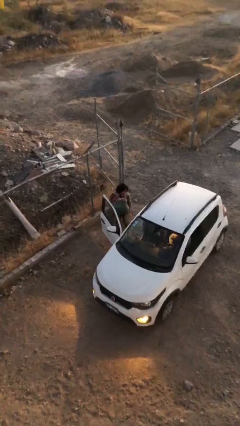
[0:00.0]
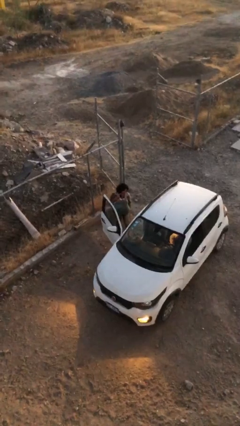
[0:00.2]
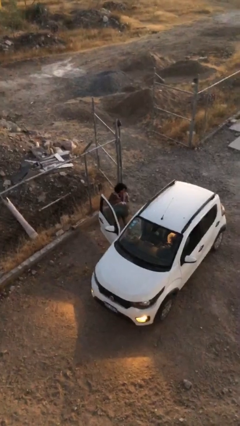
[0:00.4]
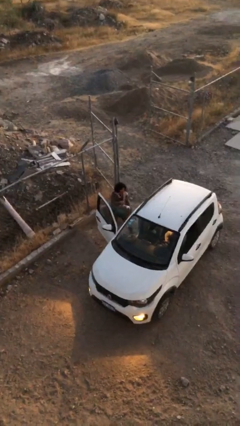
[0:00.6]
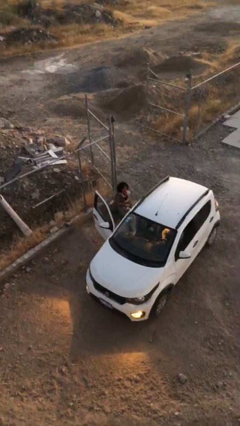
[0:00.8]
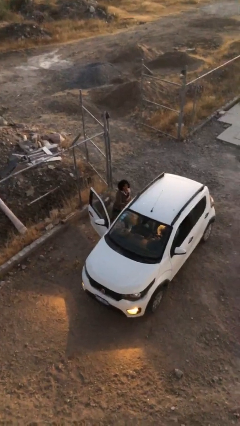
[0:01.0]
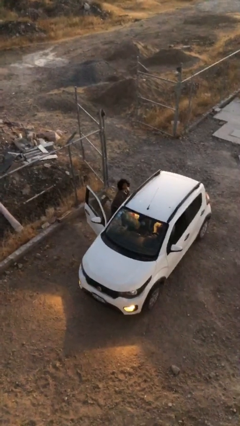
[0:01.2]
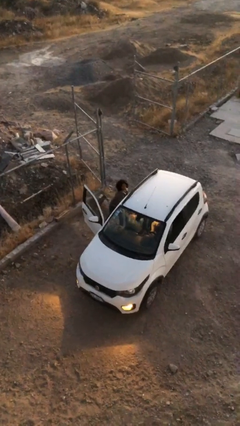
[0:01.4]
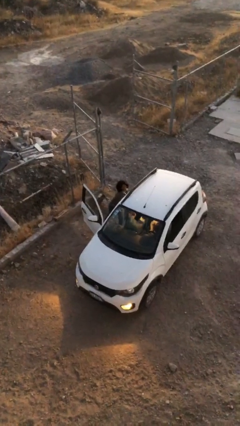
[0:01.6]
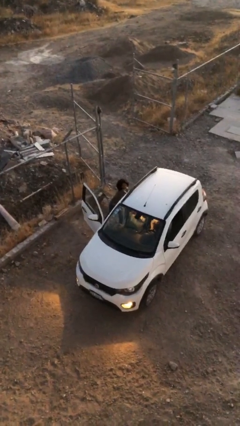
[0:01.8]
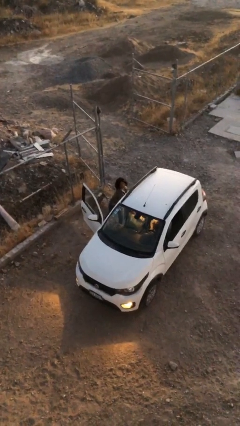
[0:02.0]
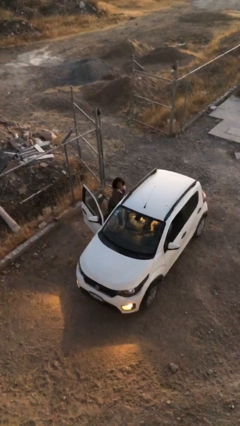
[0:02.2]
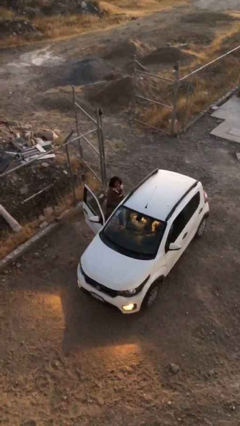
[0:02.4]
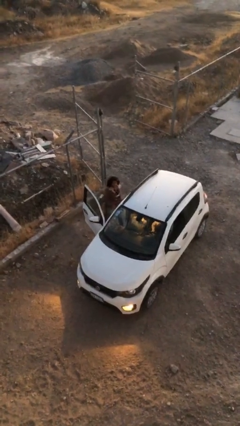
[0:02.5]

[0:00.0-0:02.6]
person loads car

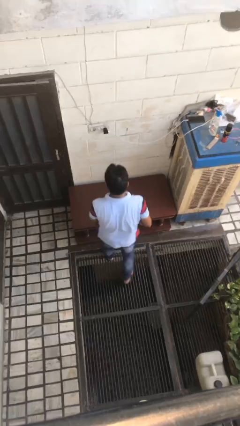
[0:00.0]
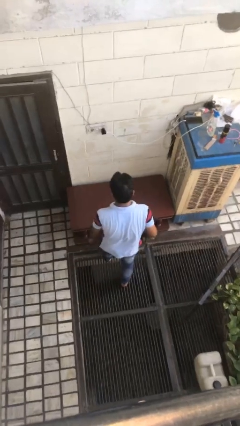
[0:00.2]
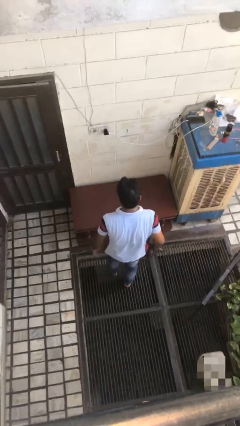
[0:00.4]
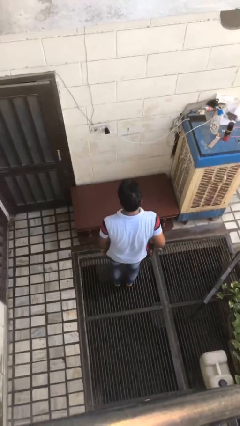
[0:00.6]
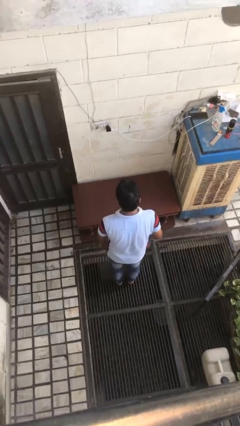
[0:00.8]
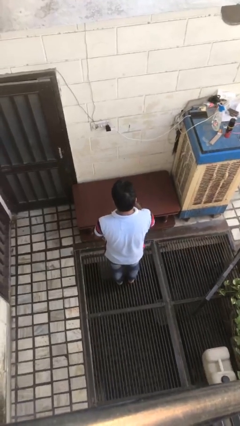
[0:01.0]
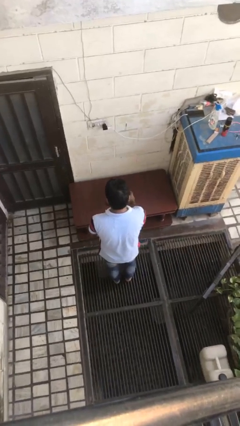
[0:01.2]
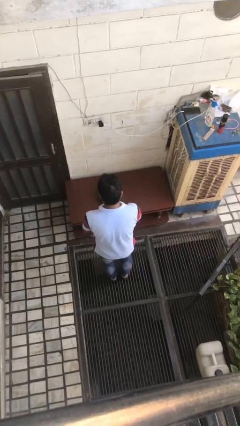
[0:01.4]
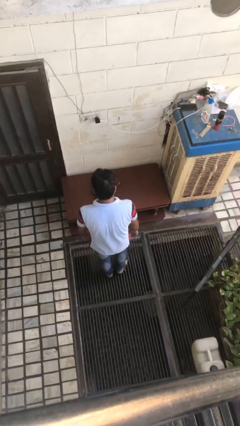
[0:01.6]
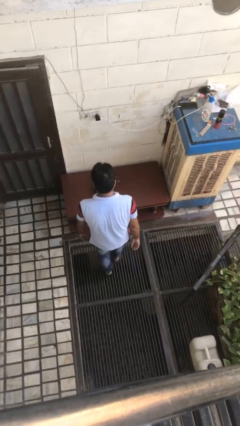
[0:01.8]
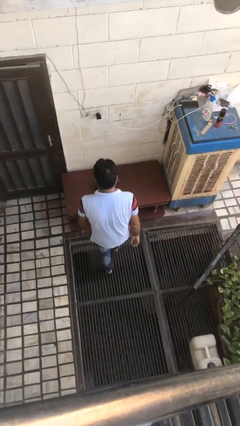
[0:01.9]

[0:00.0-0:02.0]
person throws object on table

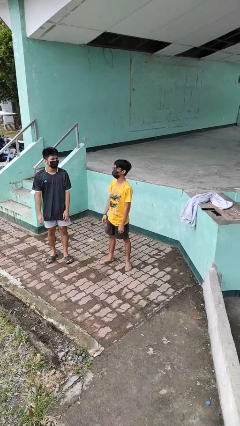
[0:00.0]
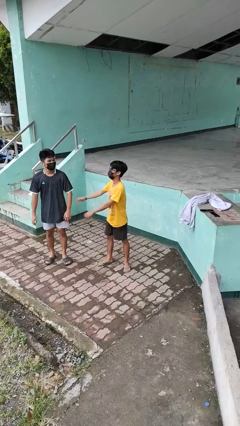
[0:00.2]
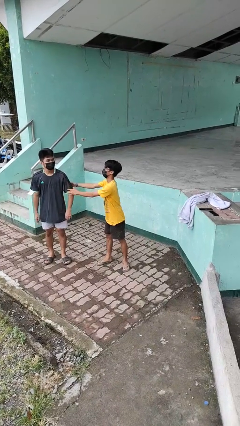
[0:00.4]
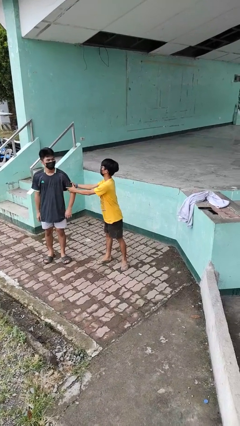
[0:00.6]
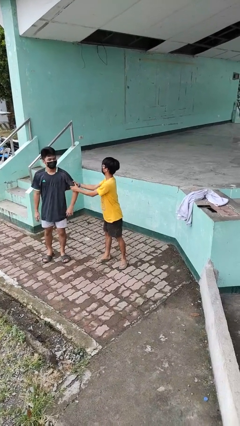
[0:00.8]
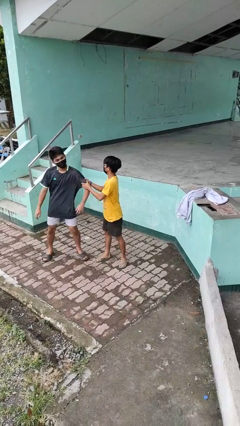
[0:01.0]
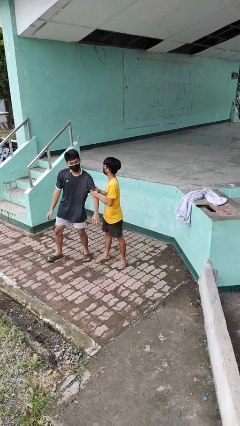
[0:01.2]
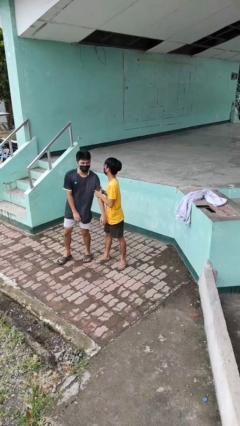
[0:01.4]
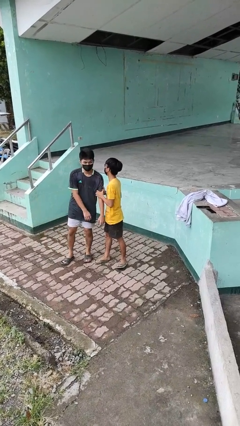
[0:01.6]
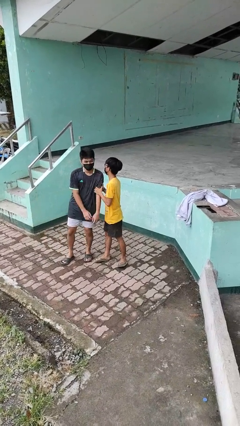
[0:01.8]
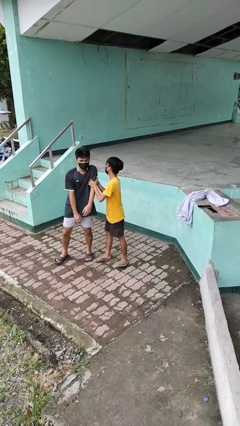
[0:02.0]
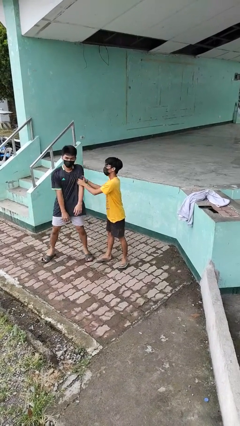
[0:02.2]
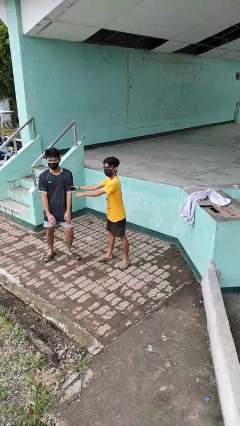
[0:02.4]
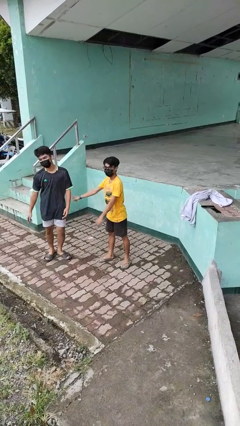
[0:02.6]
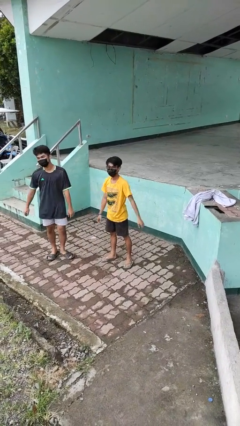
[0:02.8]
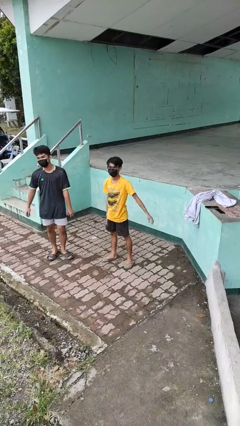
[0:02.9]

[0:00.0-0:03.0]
person grabs person by bicep

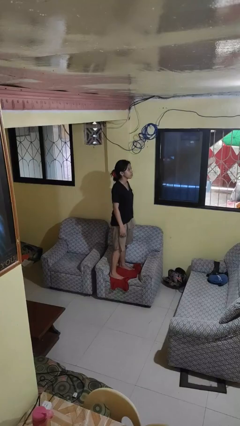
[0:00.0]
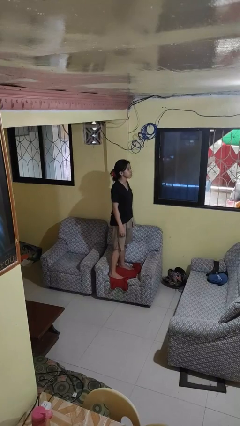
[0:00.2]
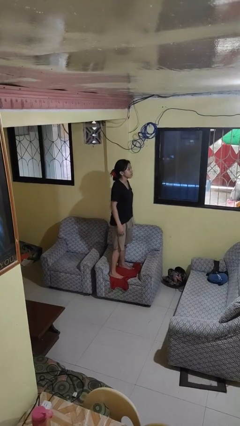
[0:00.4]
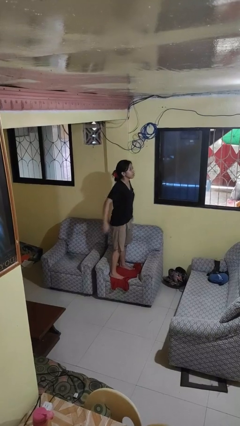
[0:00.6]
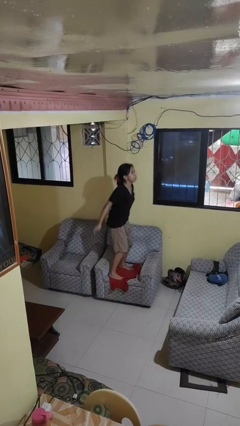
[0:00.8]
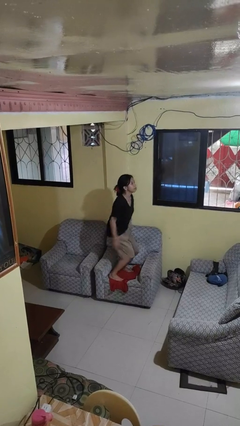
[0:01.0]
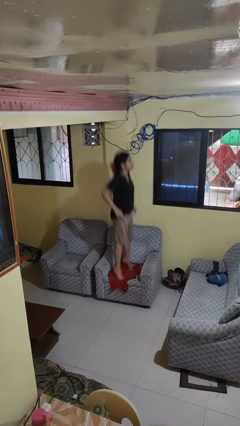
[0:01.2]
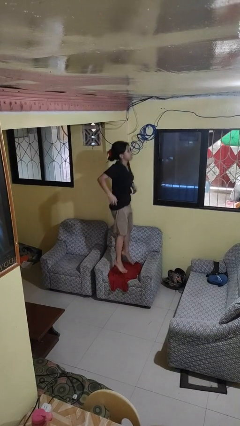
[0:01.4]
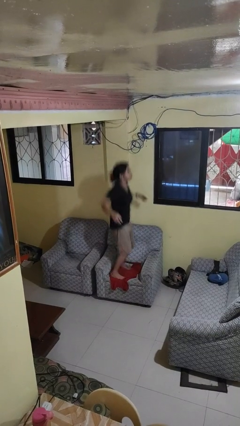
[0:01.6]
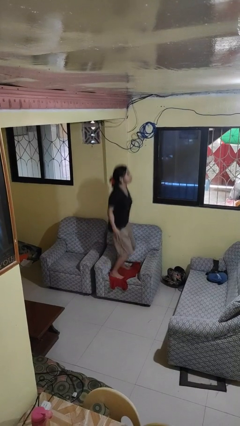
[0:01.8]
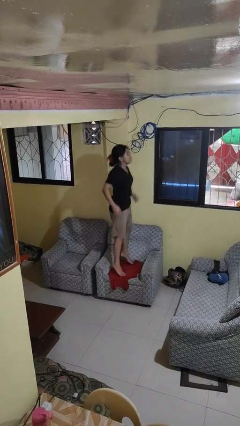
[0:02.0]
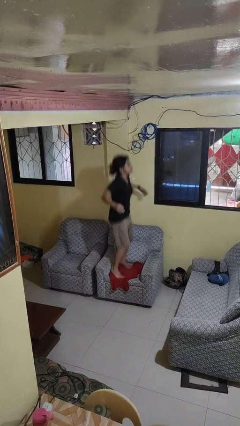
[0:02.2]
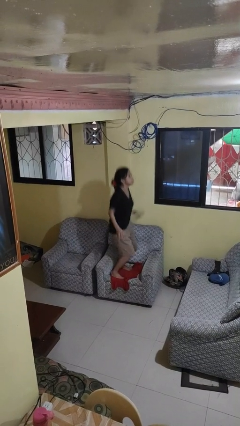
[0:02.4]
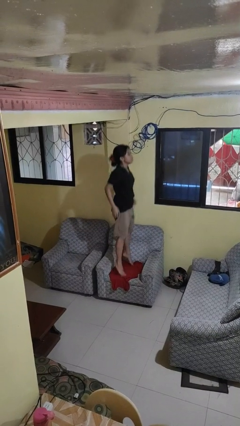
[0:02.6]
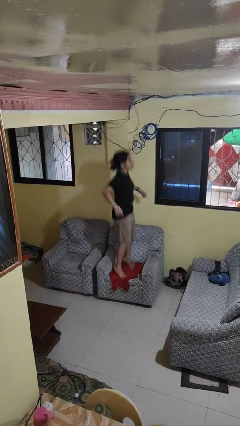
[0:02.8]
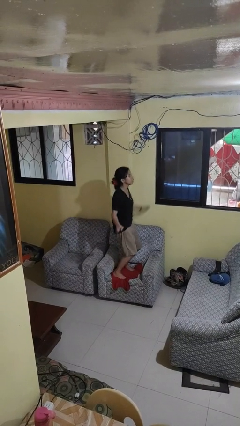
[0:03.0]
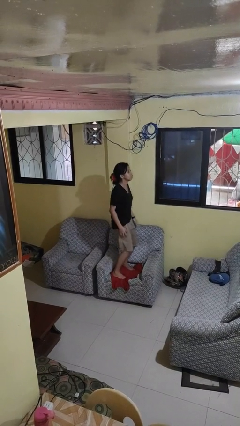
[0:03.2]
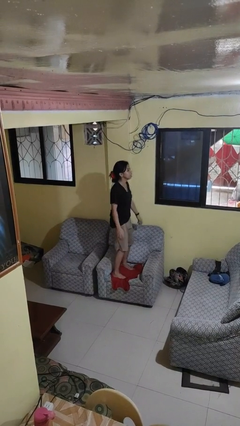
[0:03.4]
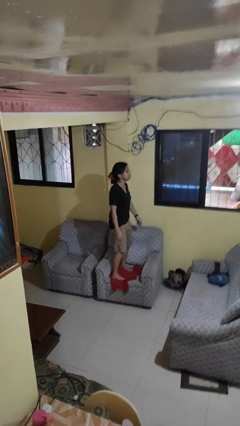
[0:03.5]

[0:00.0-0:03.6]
person jumps on couch

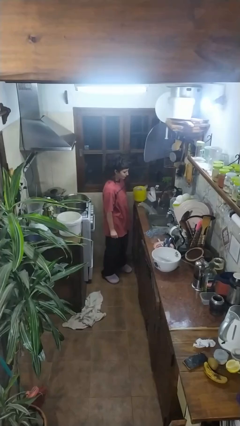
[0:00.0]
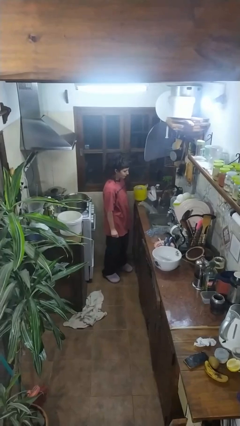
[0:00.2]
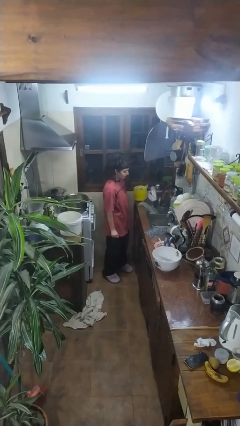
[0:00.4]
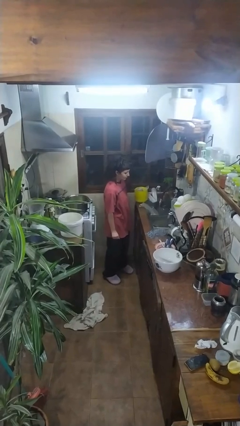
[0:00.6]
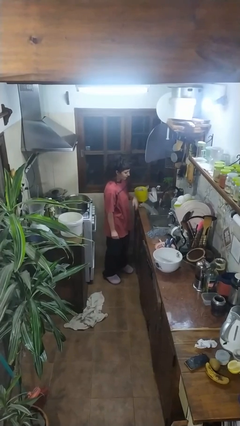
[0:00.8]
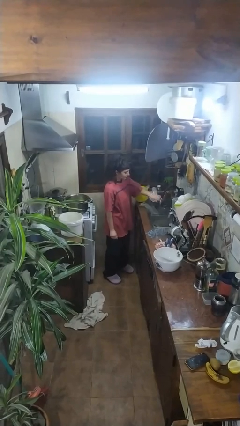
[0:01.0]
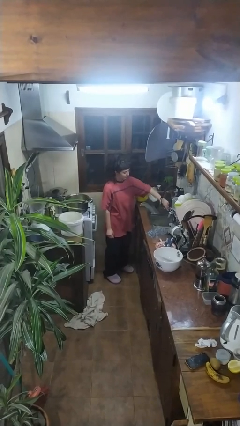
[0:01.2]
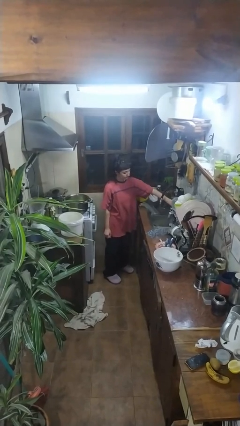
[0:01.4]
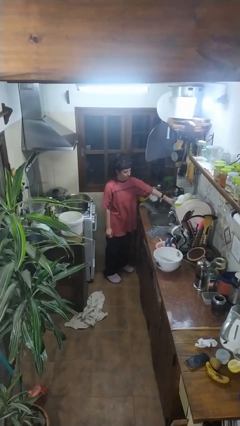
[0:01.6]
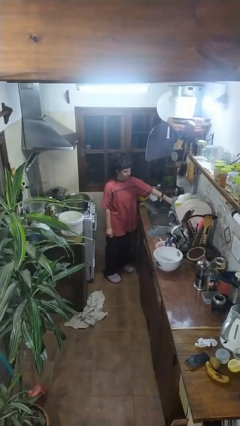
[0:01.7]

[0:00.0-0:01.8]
person turns off faucet

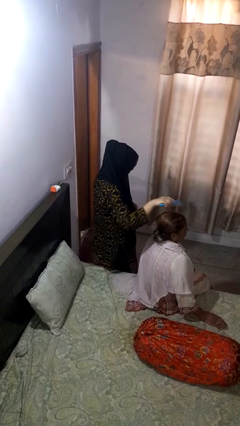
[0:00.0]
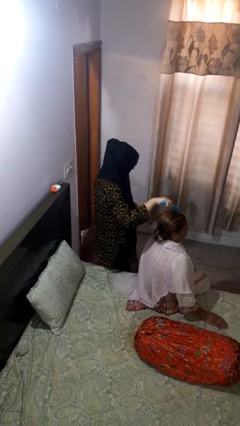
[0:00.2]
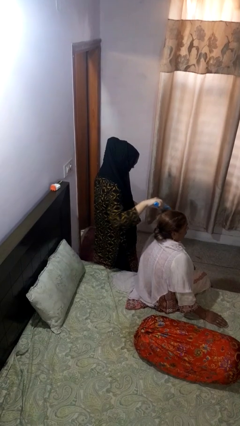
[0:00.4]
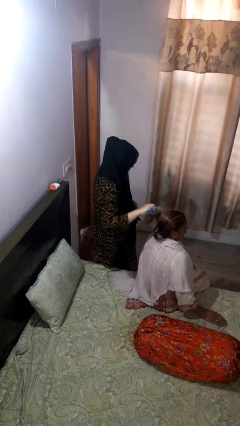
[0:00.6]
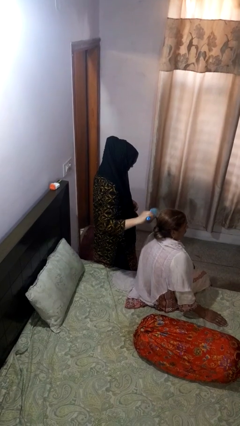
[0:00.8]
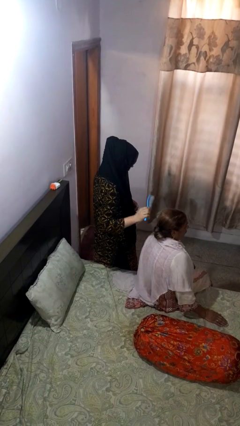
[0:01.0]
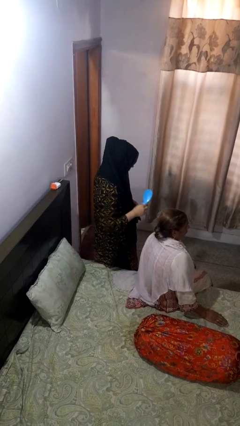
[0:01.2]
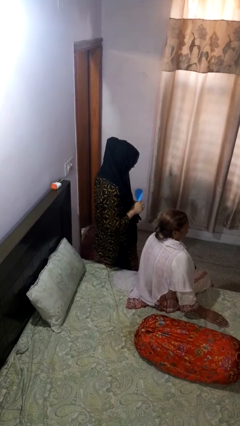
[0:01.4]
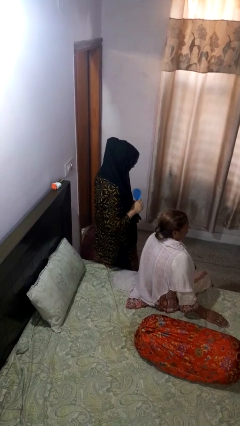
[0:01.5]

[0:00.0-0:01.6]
person brushes hair of person

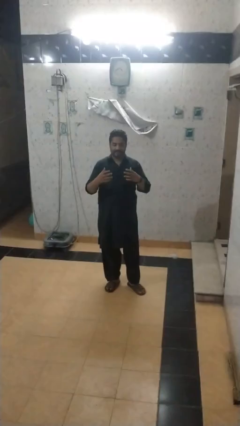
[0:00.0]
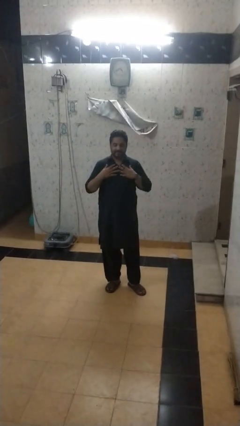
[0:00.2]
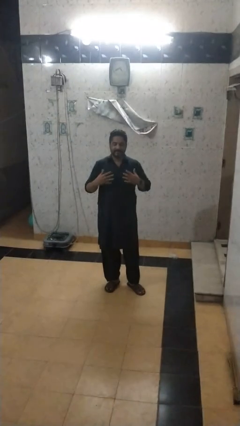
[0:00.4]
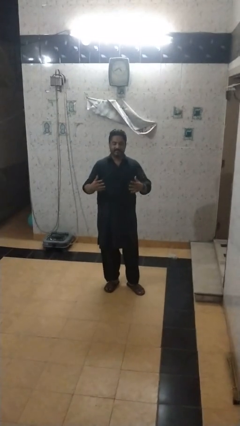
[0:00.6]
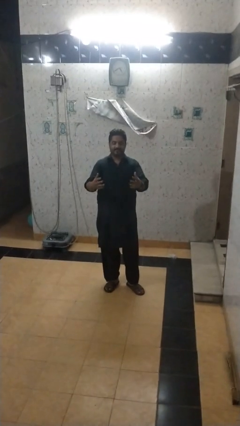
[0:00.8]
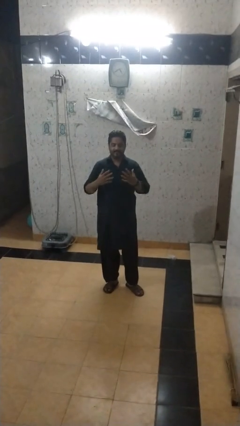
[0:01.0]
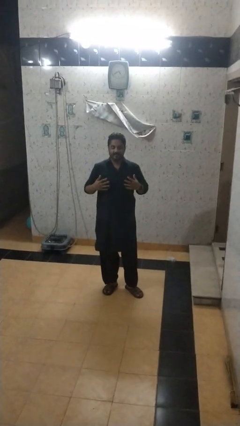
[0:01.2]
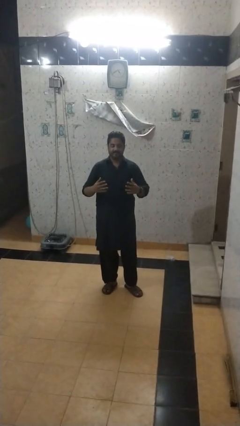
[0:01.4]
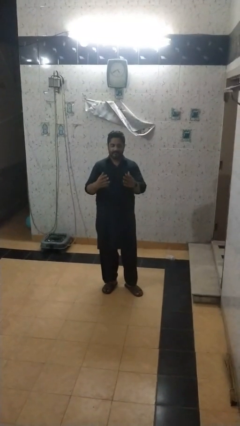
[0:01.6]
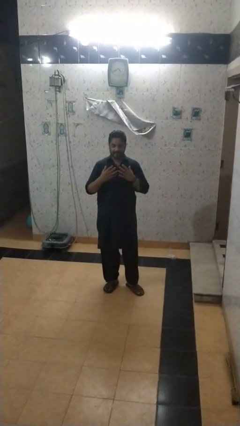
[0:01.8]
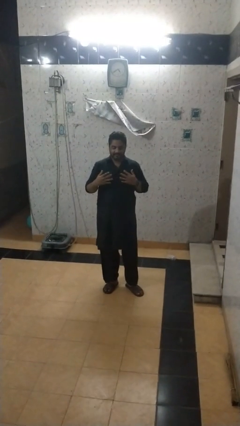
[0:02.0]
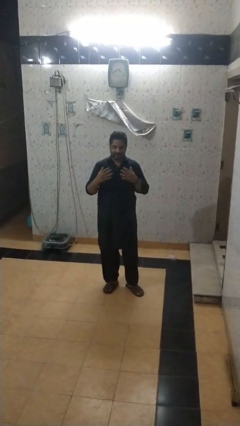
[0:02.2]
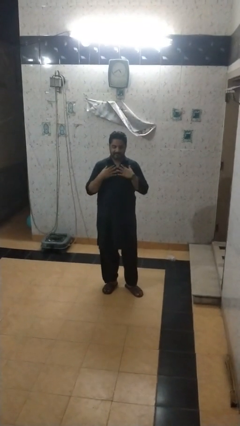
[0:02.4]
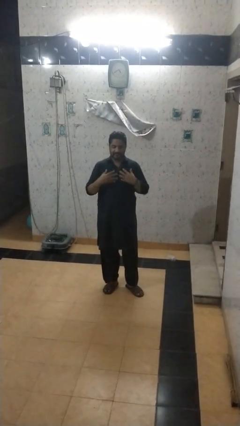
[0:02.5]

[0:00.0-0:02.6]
person drums on chest
